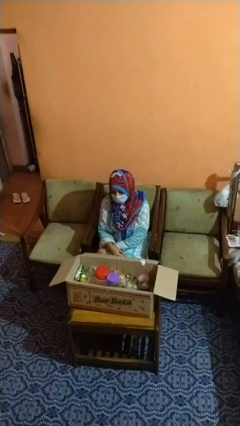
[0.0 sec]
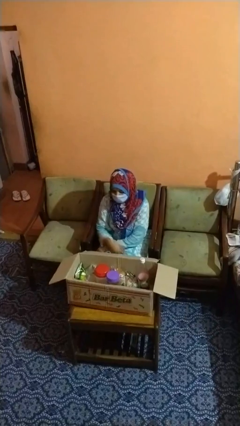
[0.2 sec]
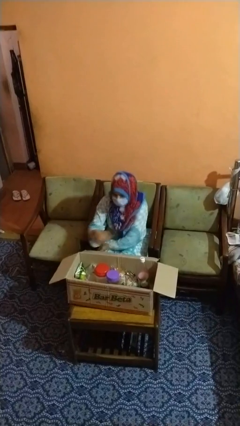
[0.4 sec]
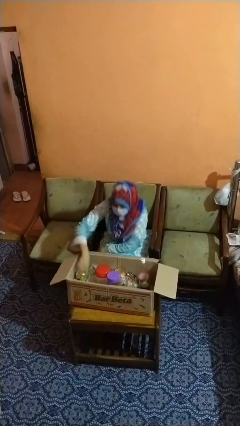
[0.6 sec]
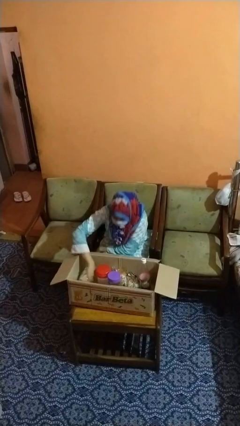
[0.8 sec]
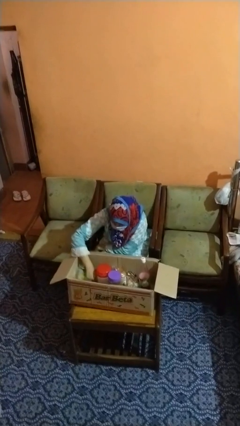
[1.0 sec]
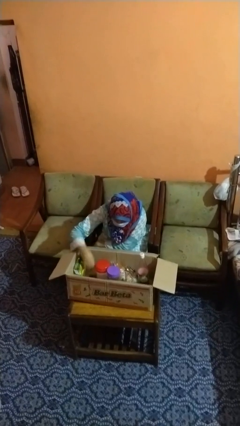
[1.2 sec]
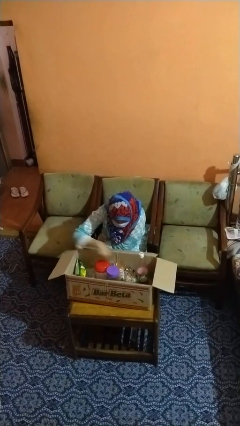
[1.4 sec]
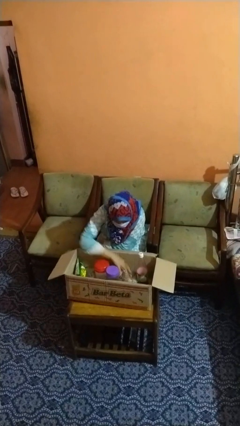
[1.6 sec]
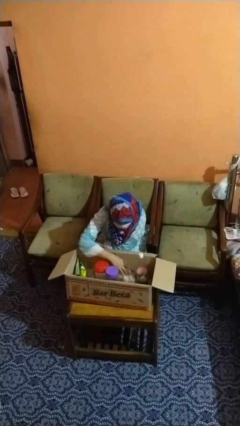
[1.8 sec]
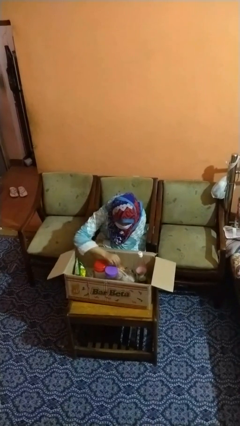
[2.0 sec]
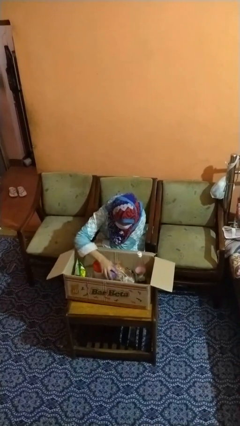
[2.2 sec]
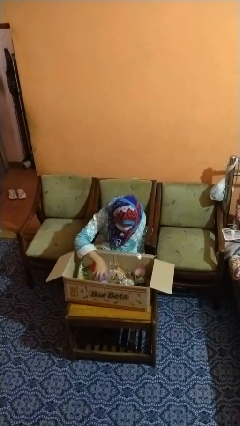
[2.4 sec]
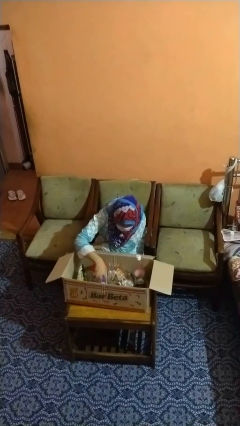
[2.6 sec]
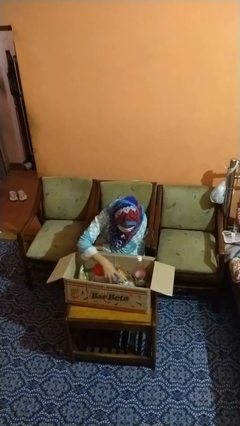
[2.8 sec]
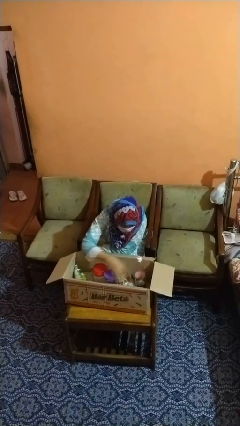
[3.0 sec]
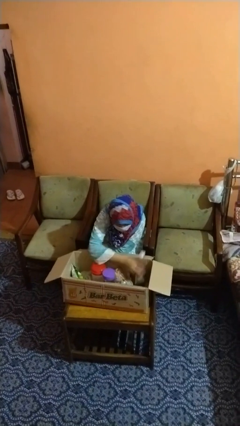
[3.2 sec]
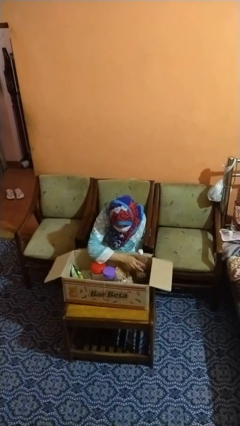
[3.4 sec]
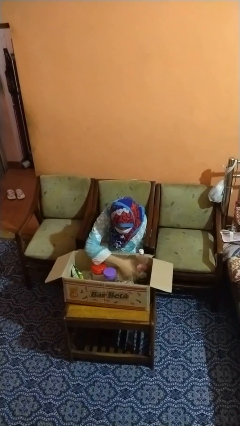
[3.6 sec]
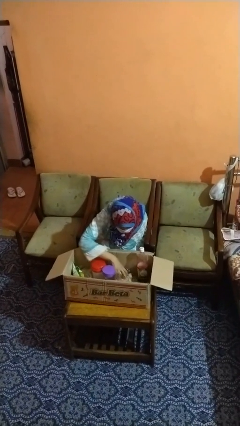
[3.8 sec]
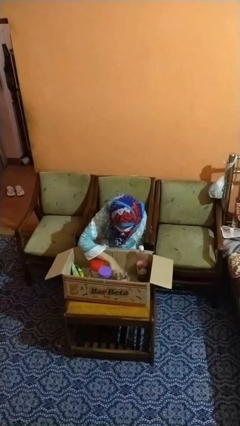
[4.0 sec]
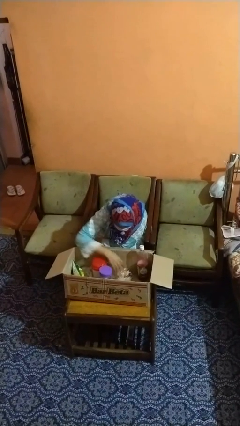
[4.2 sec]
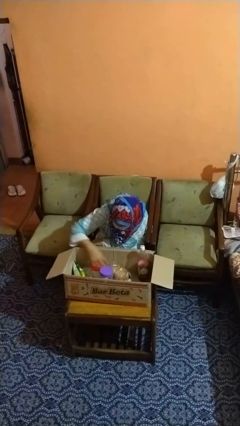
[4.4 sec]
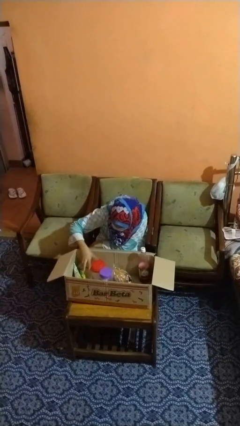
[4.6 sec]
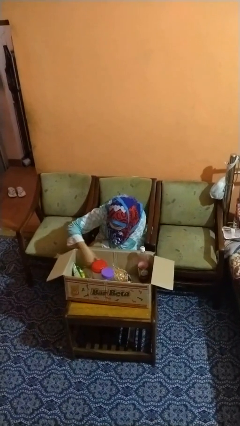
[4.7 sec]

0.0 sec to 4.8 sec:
person searches in box

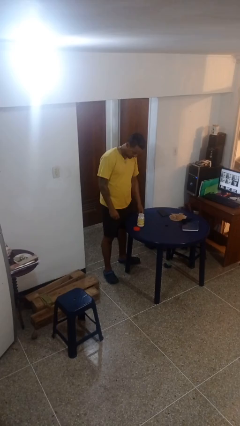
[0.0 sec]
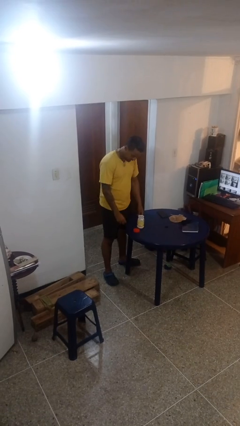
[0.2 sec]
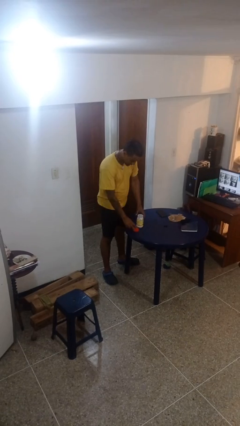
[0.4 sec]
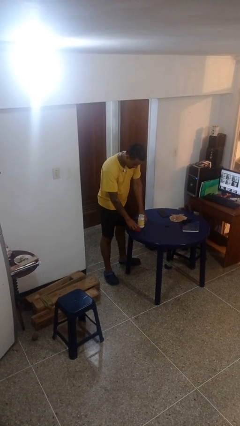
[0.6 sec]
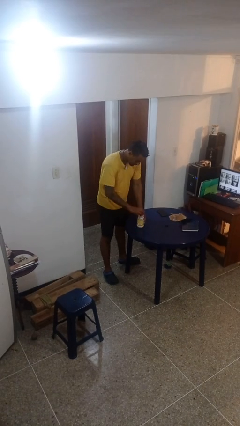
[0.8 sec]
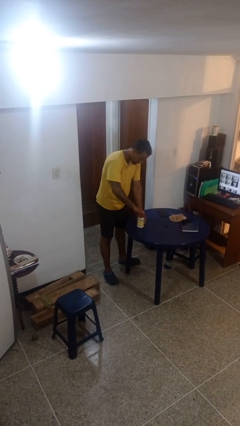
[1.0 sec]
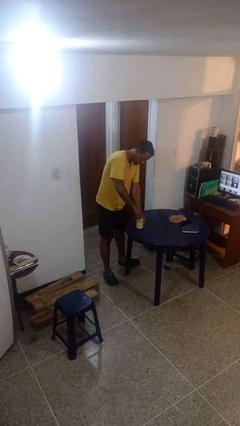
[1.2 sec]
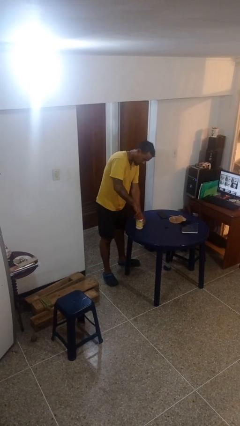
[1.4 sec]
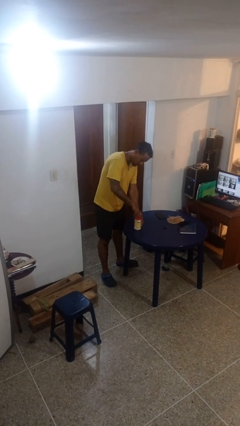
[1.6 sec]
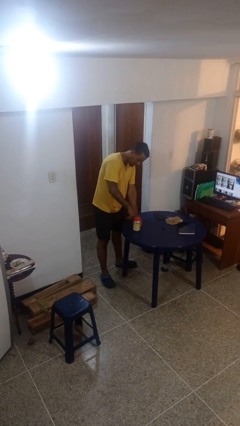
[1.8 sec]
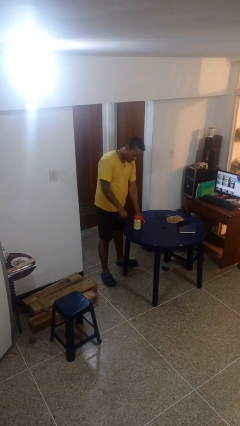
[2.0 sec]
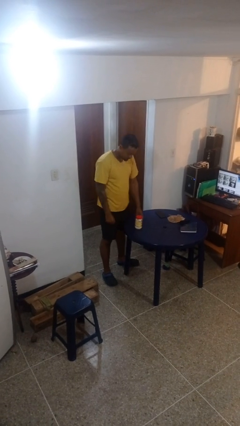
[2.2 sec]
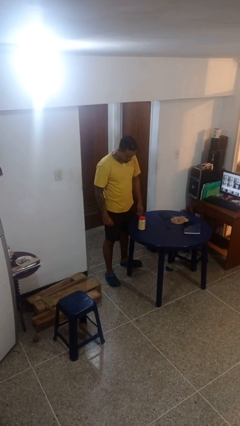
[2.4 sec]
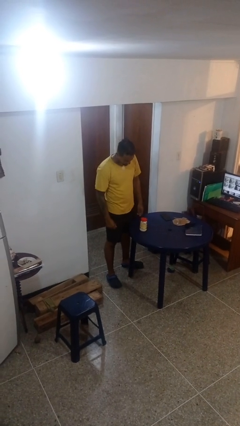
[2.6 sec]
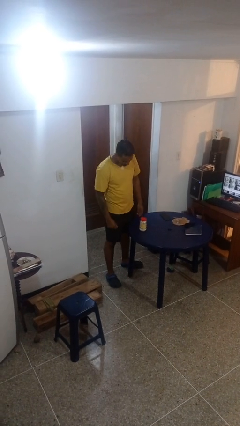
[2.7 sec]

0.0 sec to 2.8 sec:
person closes jar

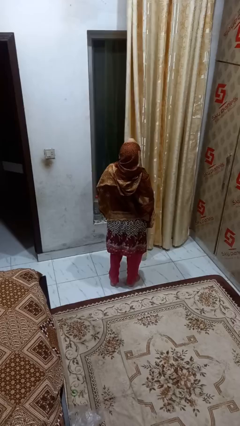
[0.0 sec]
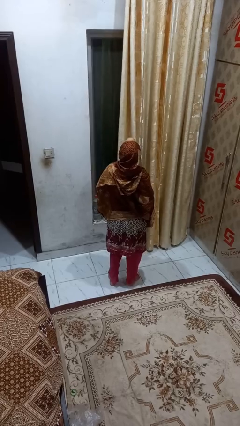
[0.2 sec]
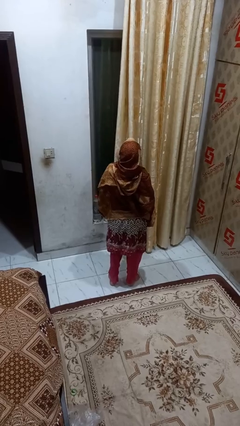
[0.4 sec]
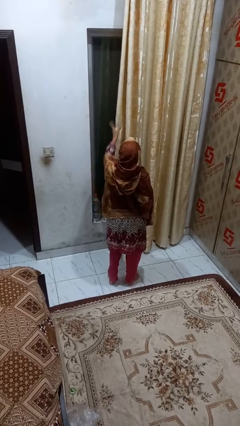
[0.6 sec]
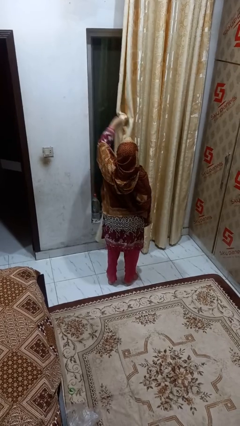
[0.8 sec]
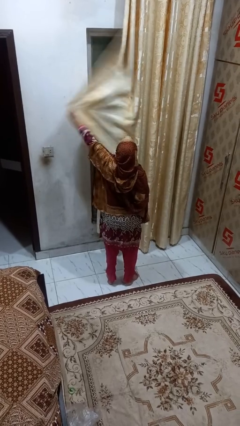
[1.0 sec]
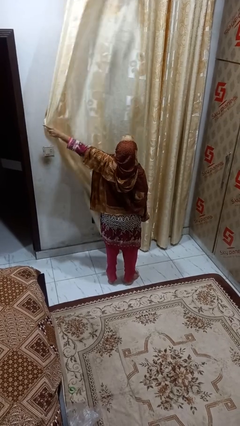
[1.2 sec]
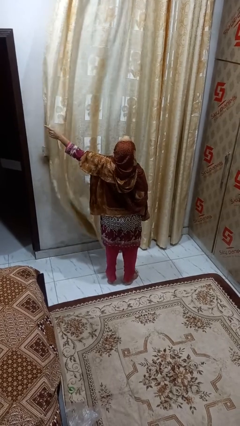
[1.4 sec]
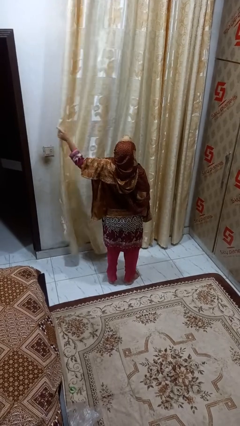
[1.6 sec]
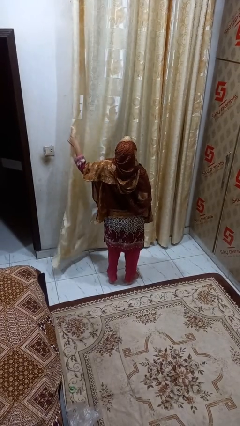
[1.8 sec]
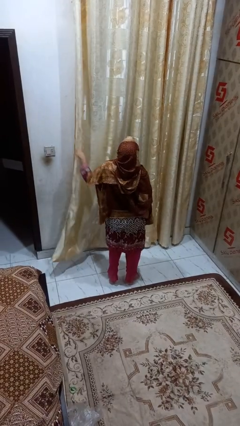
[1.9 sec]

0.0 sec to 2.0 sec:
person closes curtains

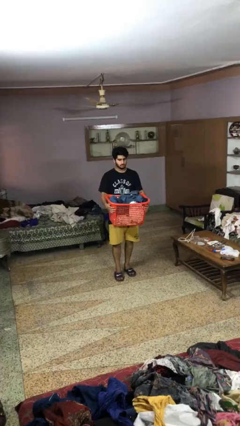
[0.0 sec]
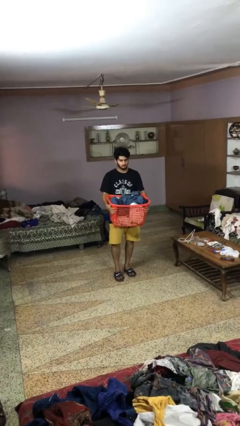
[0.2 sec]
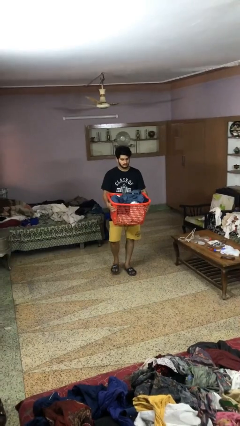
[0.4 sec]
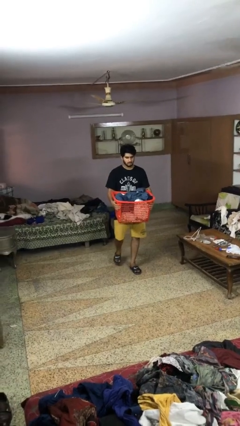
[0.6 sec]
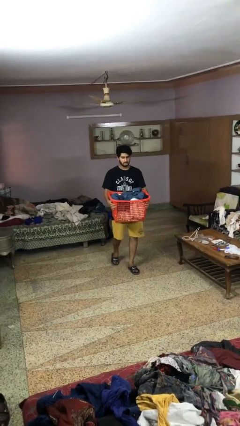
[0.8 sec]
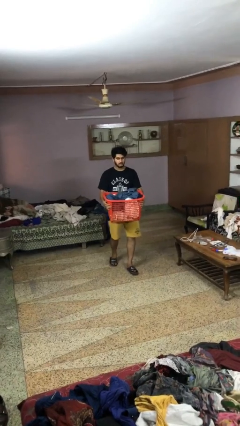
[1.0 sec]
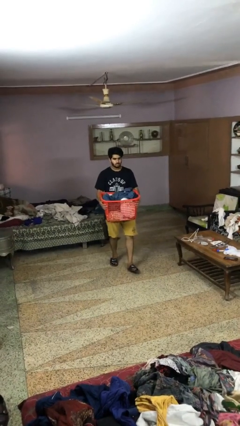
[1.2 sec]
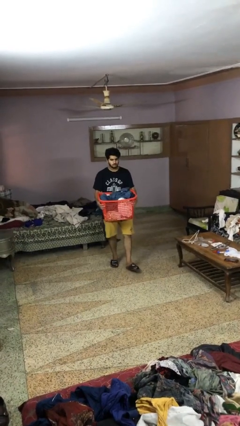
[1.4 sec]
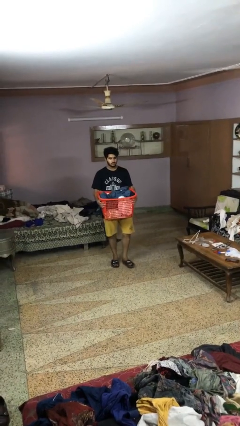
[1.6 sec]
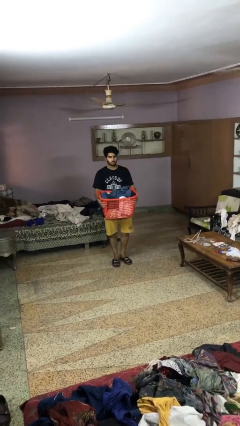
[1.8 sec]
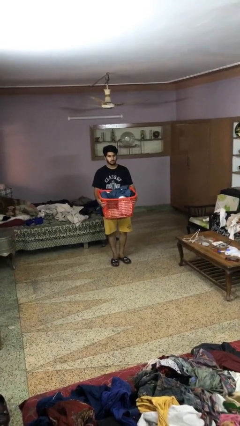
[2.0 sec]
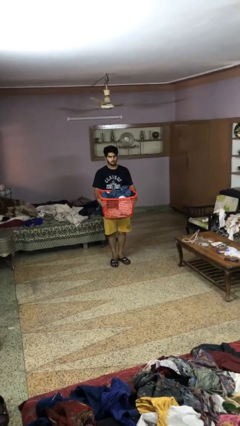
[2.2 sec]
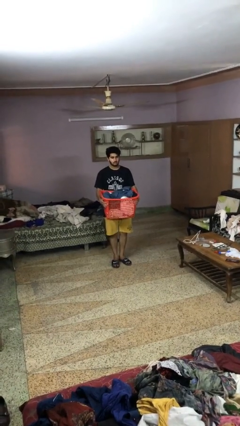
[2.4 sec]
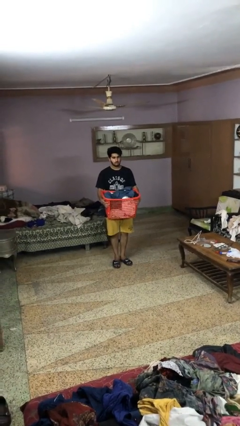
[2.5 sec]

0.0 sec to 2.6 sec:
person carries laundry basket

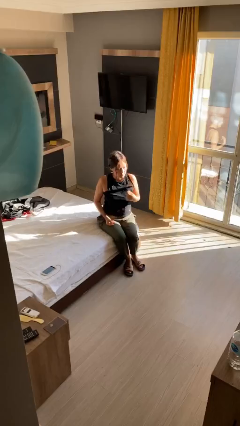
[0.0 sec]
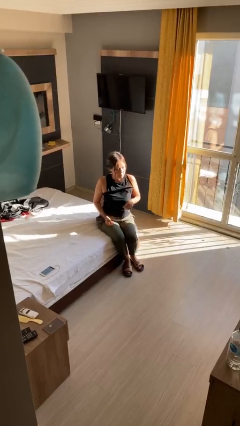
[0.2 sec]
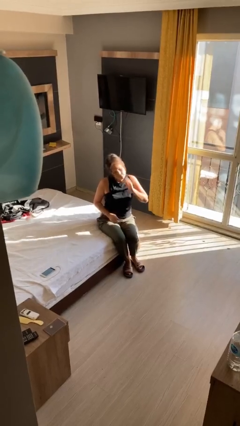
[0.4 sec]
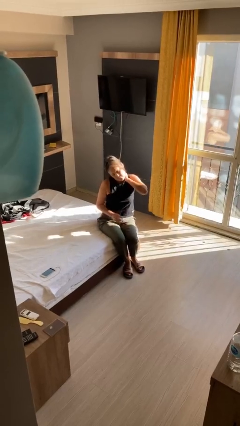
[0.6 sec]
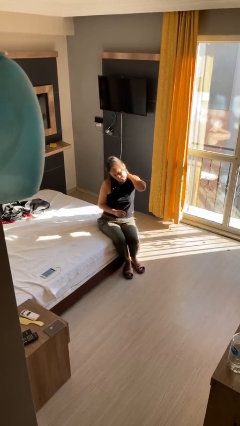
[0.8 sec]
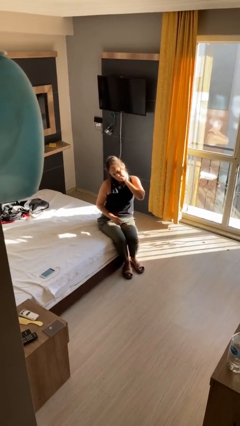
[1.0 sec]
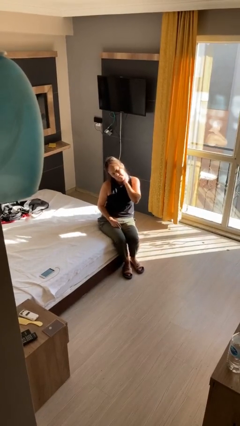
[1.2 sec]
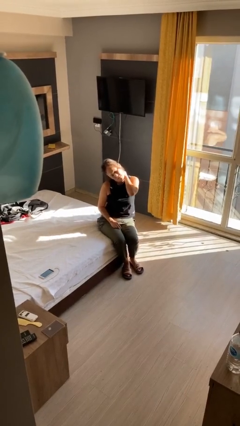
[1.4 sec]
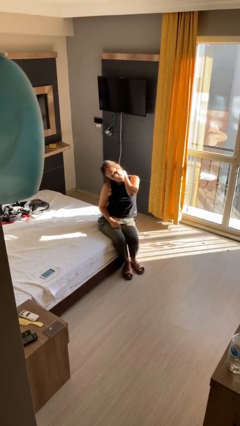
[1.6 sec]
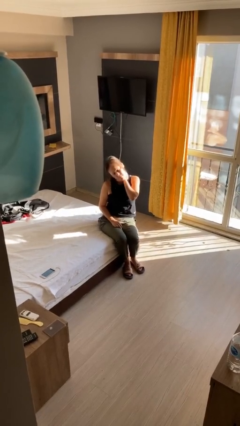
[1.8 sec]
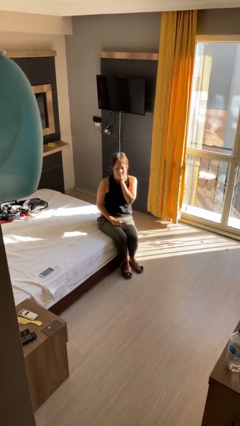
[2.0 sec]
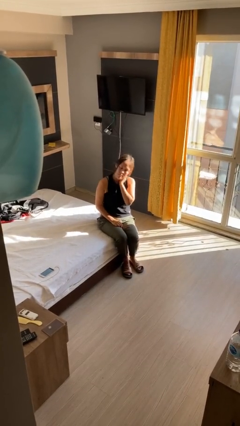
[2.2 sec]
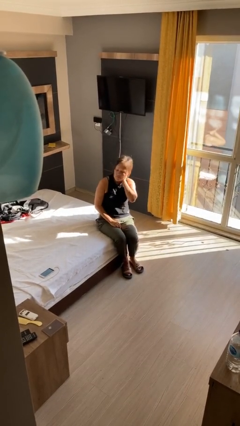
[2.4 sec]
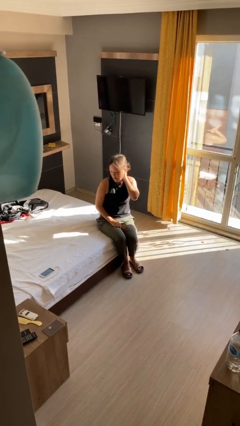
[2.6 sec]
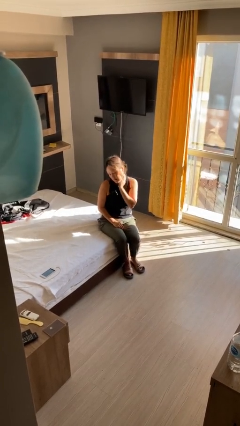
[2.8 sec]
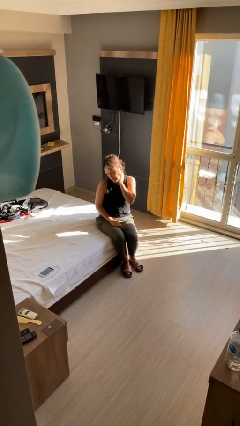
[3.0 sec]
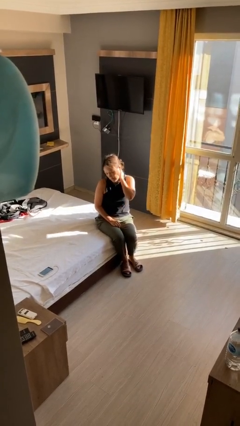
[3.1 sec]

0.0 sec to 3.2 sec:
person rubs neck

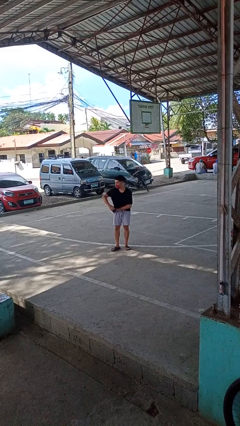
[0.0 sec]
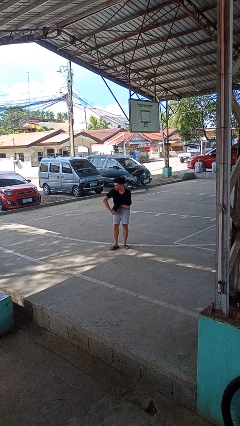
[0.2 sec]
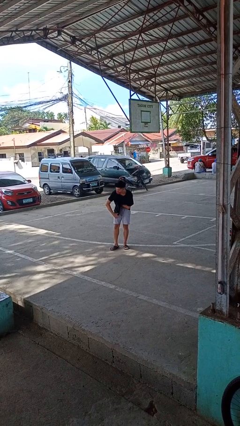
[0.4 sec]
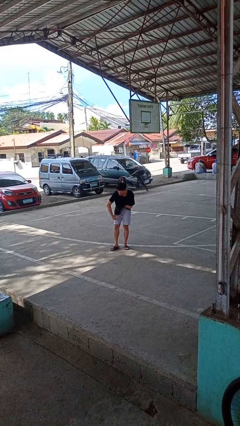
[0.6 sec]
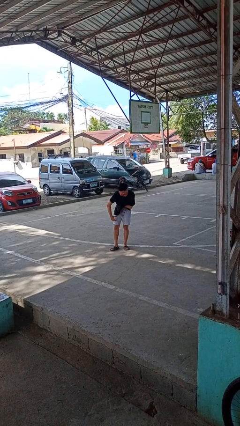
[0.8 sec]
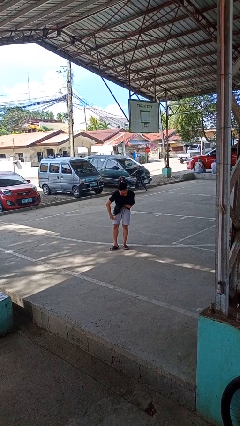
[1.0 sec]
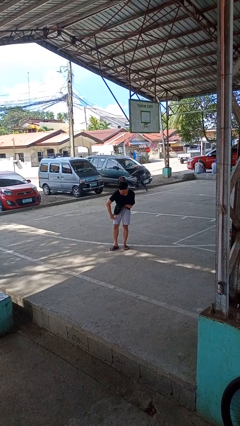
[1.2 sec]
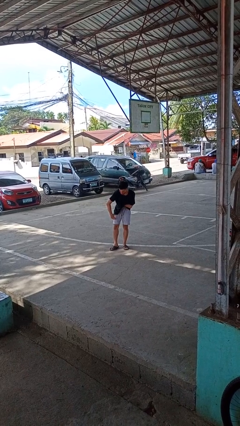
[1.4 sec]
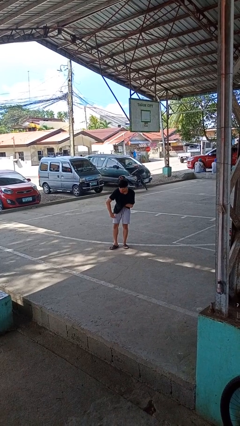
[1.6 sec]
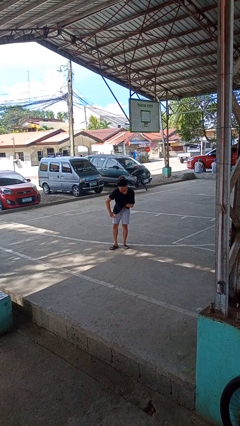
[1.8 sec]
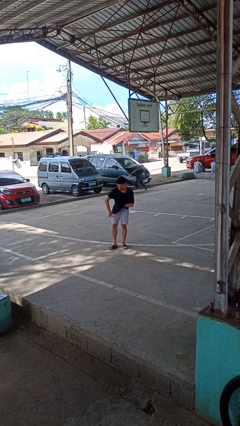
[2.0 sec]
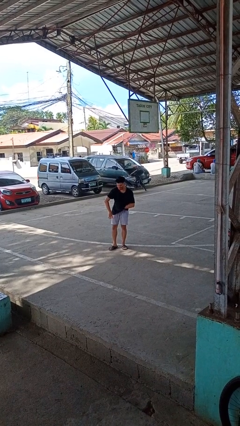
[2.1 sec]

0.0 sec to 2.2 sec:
person applies deodorant
